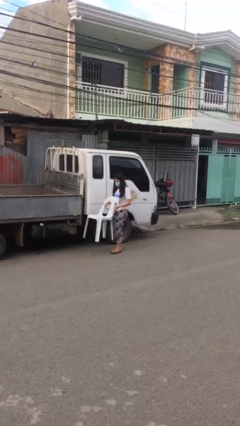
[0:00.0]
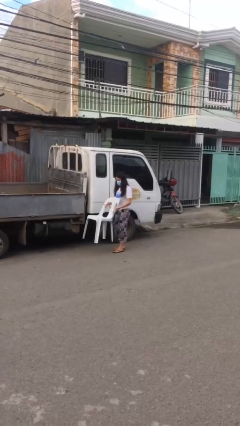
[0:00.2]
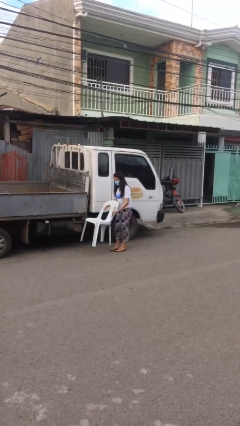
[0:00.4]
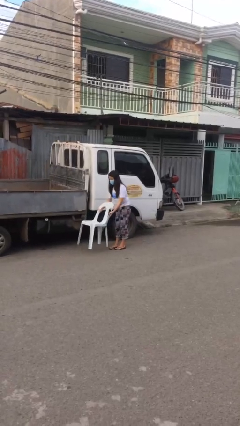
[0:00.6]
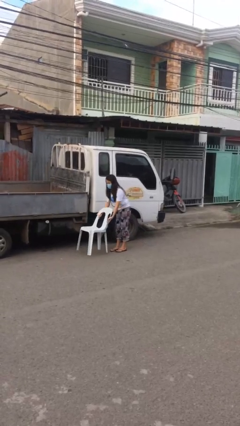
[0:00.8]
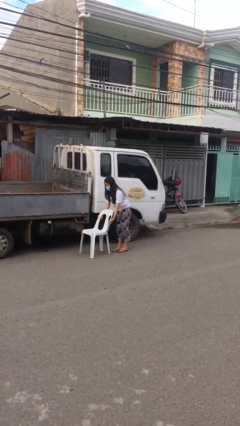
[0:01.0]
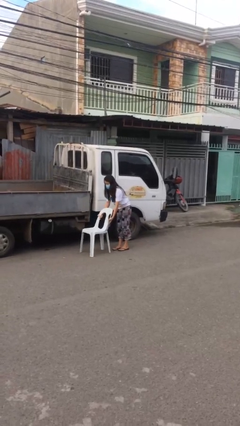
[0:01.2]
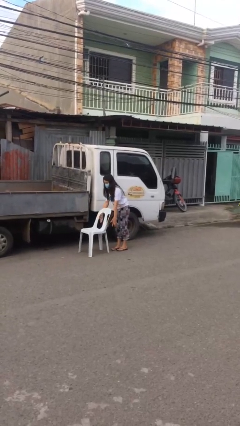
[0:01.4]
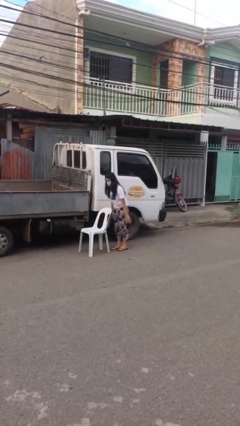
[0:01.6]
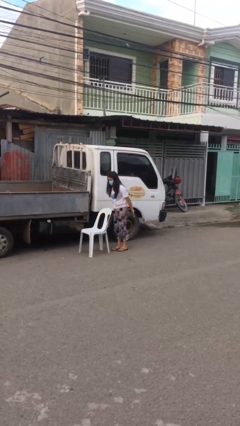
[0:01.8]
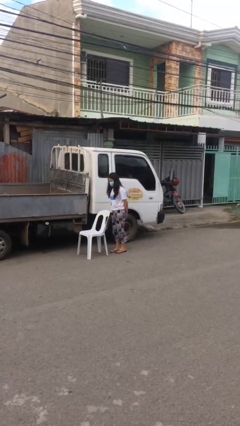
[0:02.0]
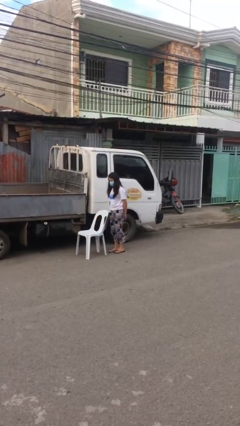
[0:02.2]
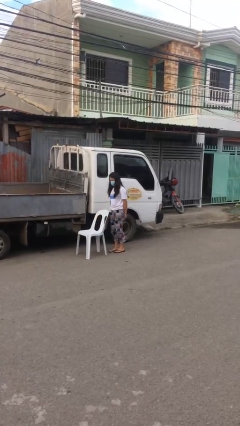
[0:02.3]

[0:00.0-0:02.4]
person puts down object on floor

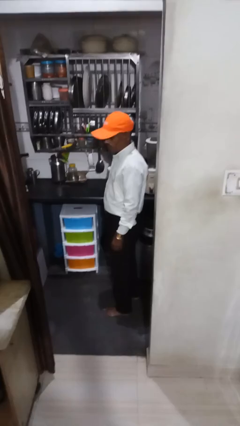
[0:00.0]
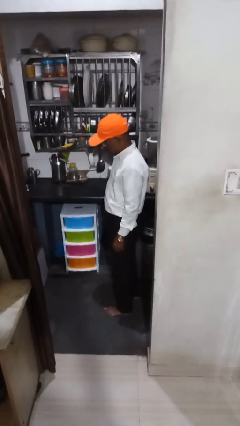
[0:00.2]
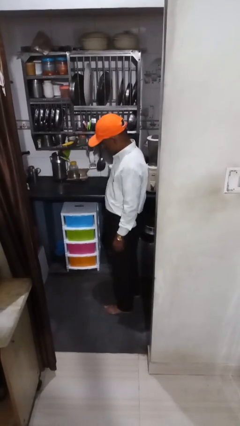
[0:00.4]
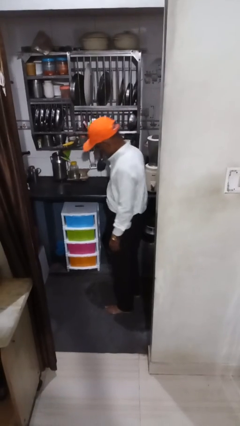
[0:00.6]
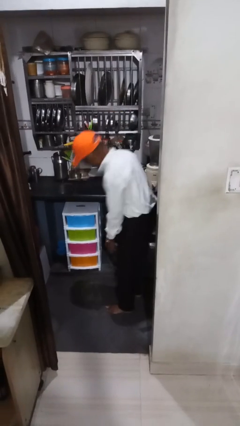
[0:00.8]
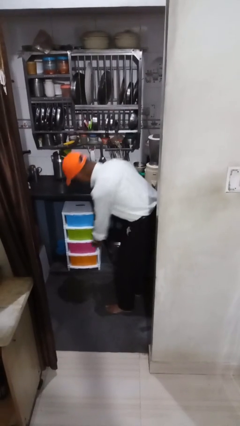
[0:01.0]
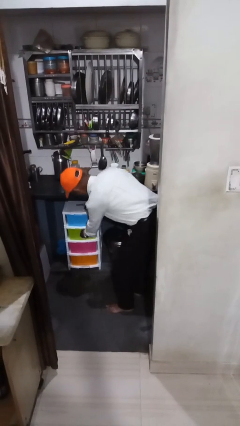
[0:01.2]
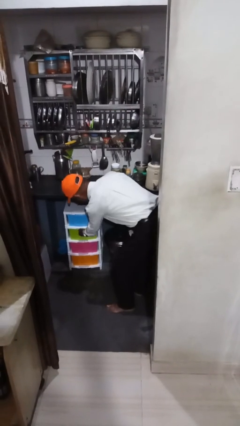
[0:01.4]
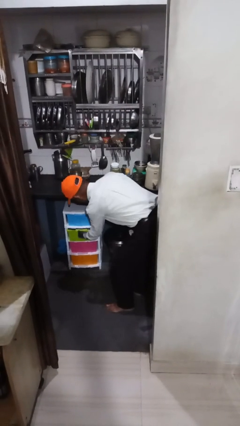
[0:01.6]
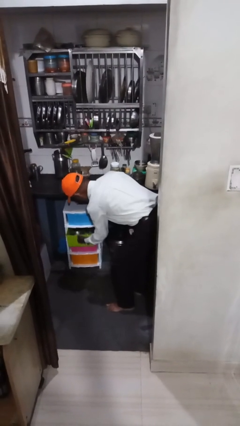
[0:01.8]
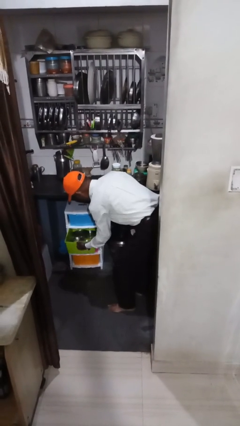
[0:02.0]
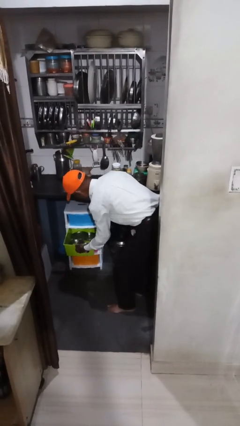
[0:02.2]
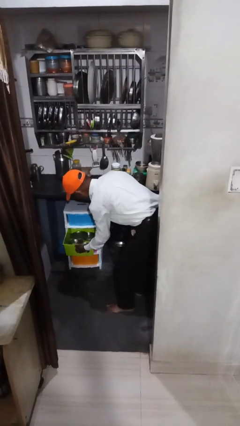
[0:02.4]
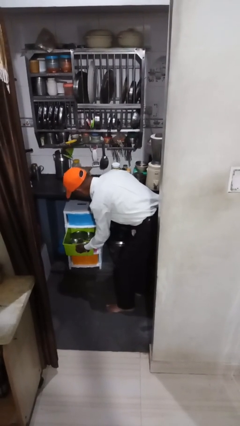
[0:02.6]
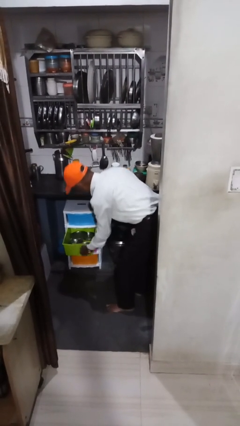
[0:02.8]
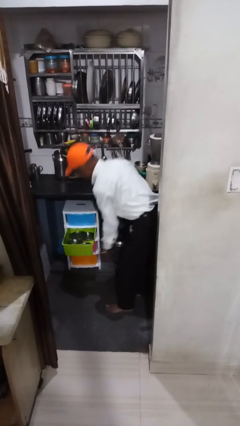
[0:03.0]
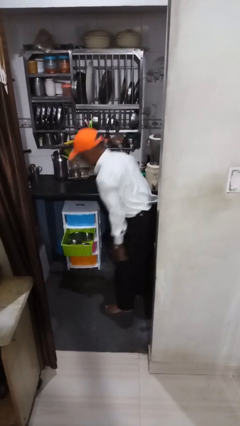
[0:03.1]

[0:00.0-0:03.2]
person opens kitchen drawer

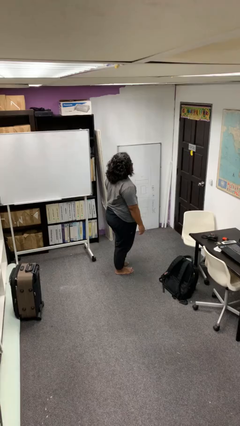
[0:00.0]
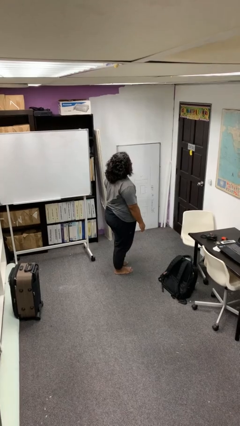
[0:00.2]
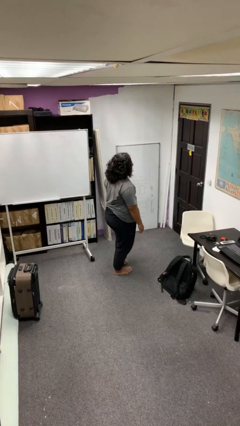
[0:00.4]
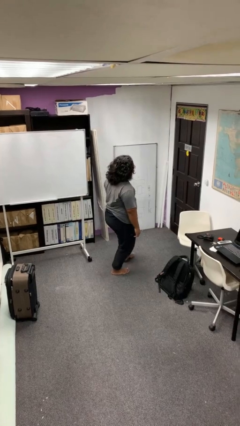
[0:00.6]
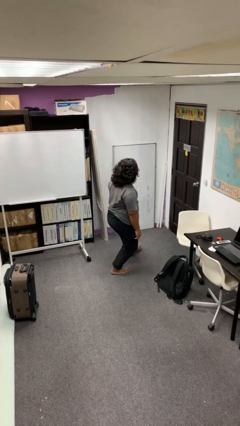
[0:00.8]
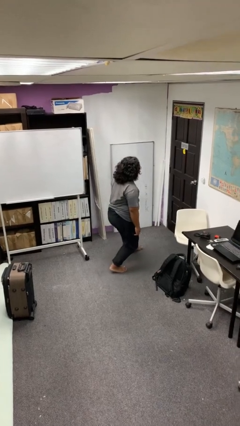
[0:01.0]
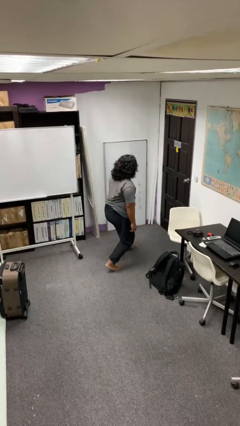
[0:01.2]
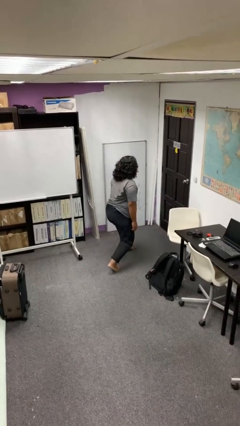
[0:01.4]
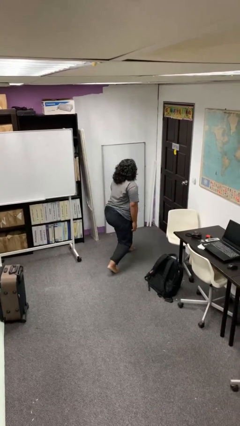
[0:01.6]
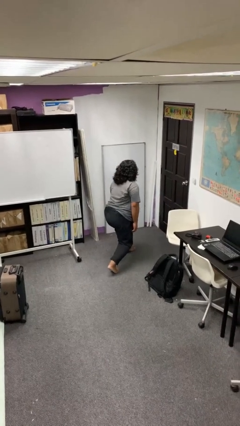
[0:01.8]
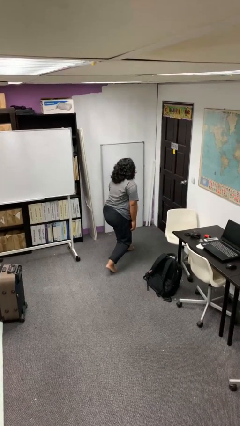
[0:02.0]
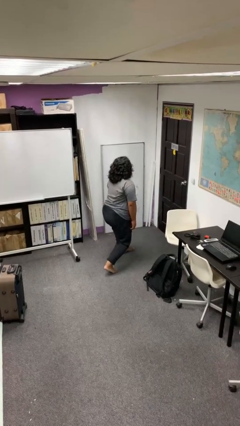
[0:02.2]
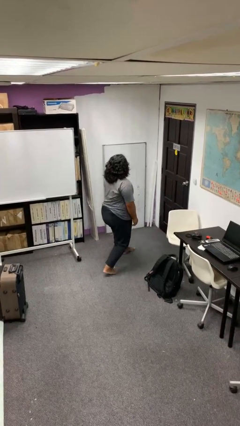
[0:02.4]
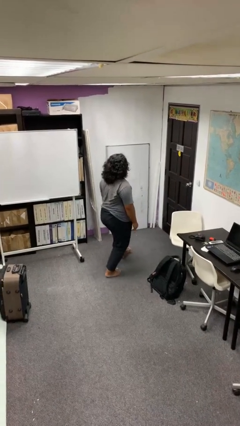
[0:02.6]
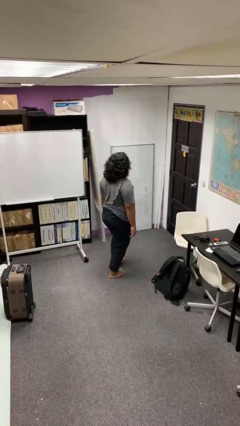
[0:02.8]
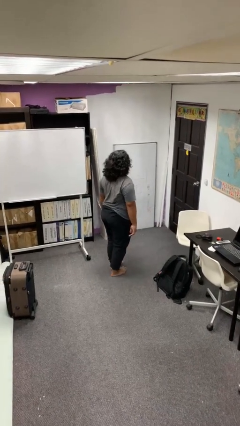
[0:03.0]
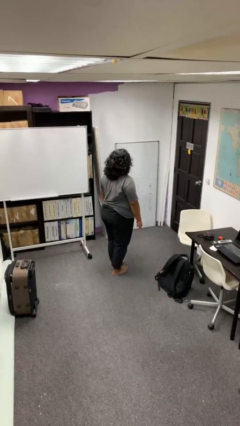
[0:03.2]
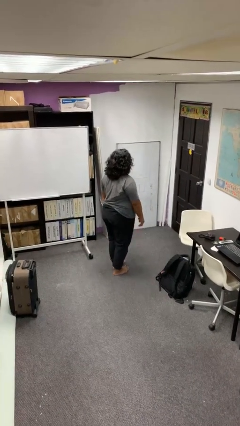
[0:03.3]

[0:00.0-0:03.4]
person exercises with lunges

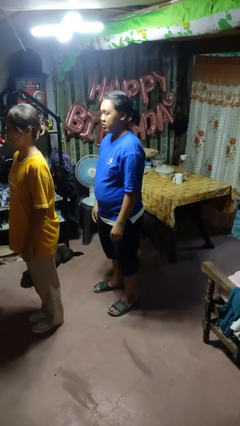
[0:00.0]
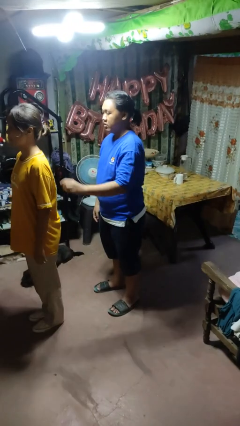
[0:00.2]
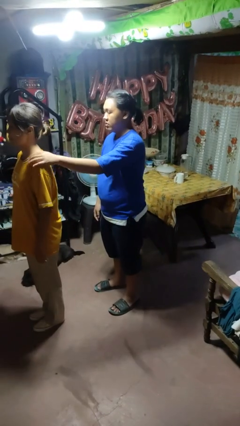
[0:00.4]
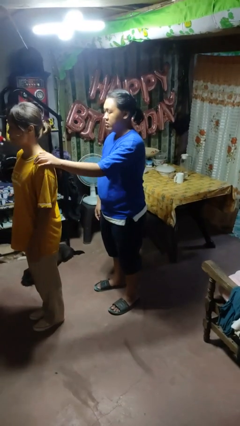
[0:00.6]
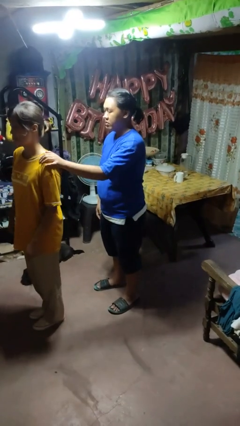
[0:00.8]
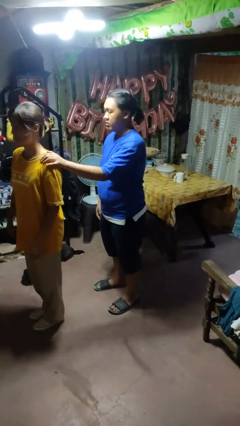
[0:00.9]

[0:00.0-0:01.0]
person grabs person by shoulder

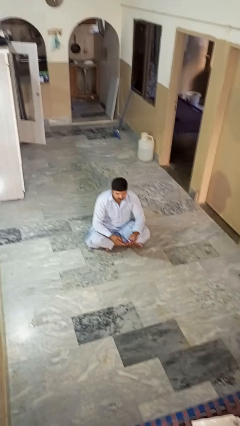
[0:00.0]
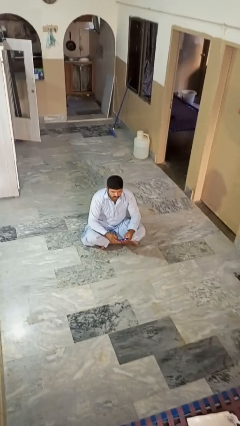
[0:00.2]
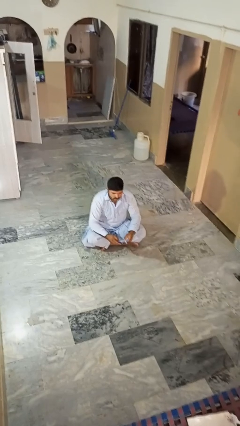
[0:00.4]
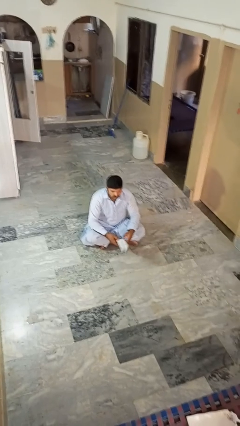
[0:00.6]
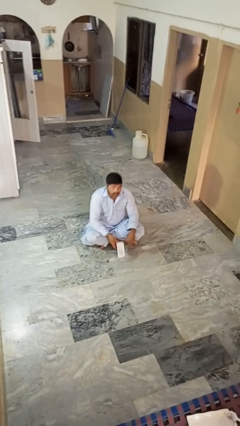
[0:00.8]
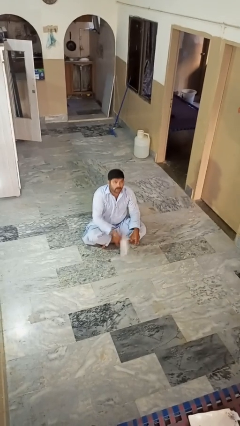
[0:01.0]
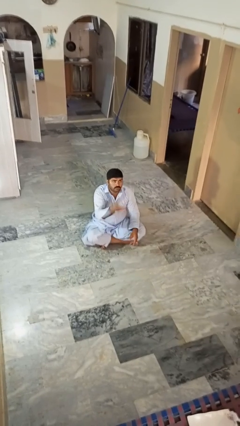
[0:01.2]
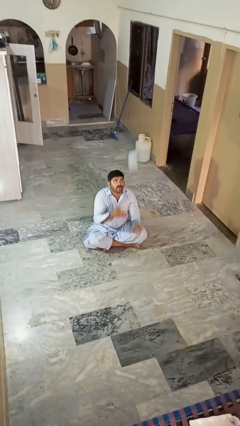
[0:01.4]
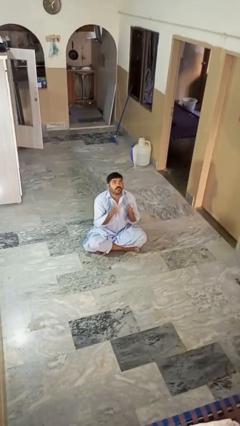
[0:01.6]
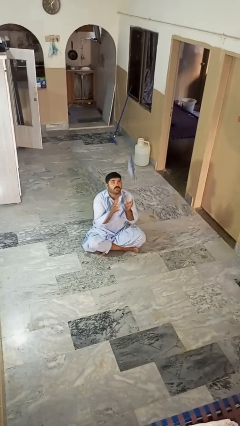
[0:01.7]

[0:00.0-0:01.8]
person drops object

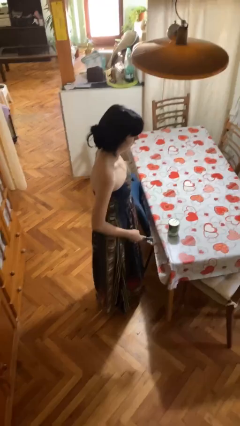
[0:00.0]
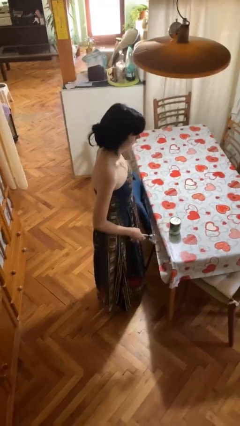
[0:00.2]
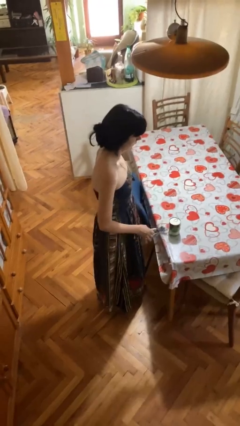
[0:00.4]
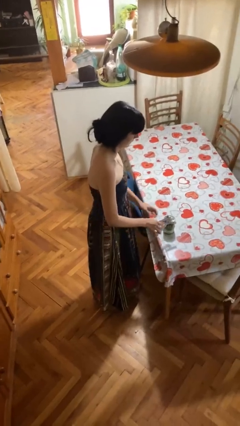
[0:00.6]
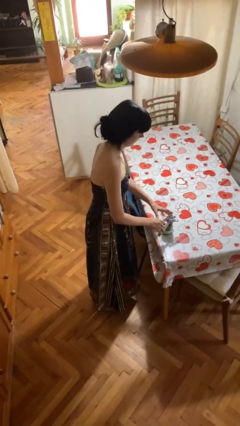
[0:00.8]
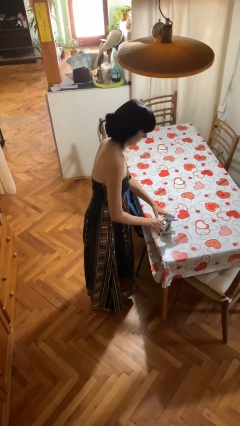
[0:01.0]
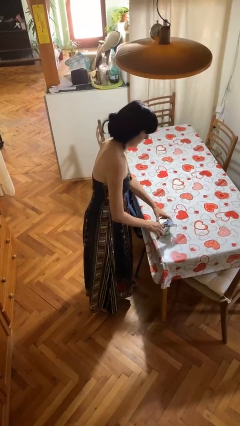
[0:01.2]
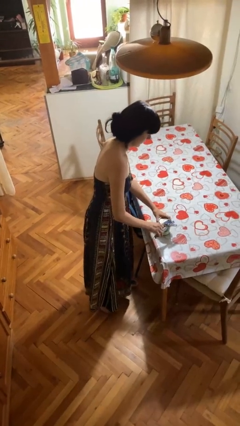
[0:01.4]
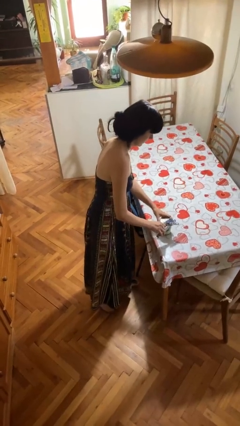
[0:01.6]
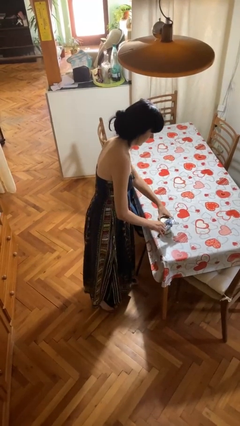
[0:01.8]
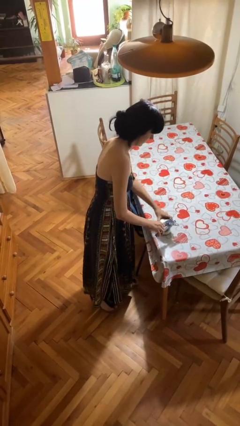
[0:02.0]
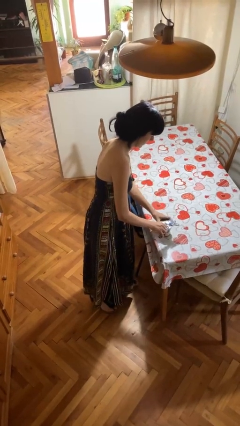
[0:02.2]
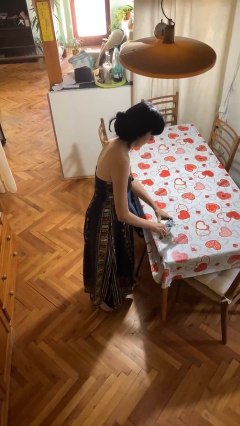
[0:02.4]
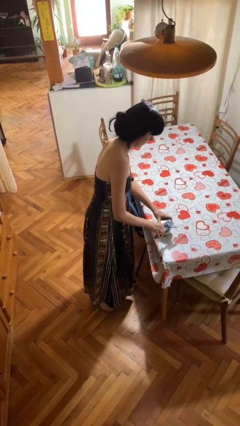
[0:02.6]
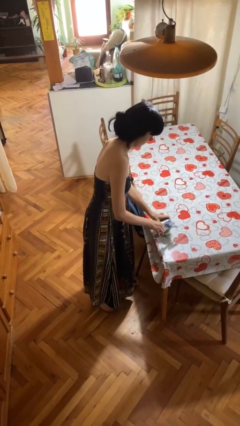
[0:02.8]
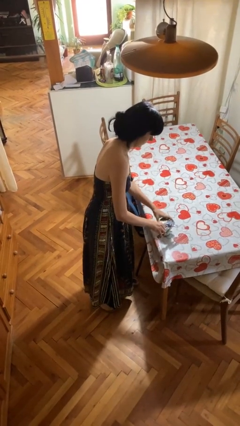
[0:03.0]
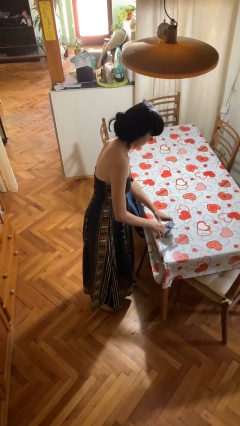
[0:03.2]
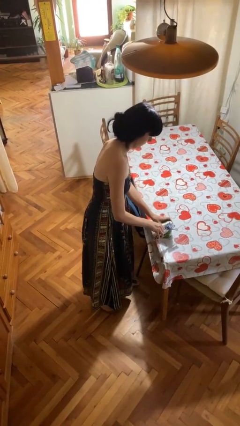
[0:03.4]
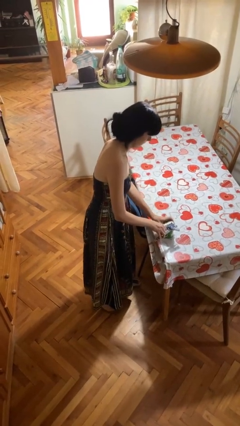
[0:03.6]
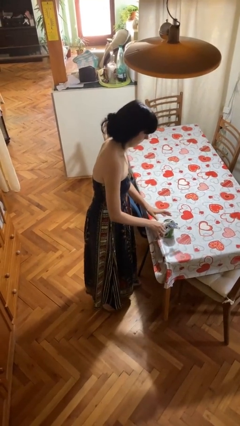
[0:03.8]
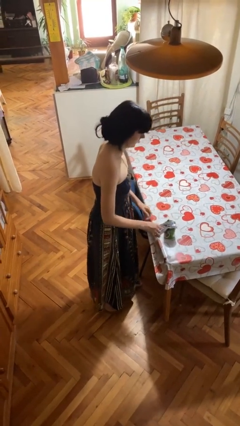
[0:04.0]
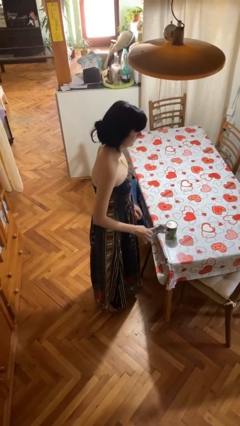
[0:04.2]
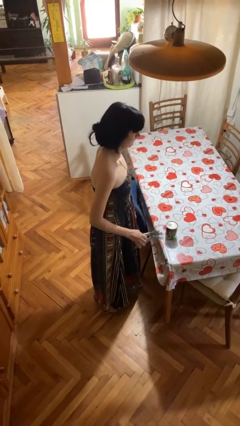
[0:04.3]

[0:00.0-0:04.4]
person opens can with can opener

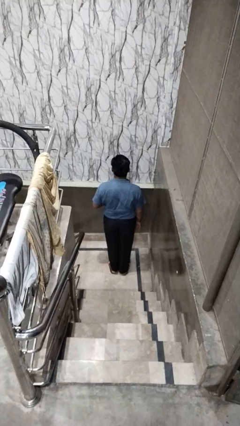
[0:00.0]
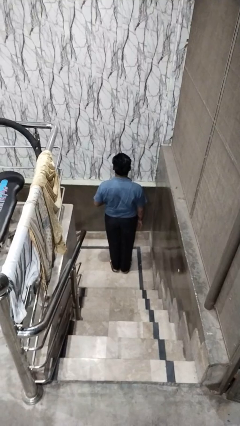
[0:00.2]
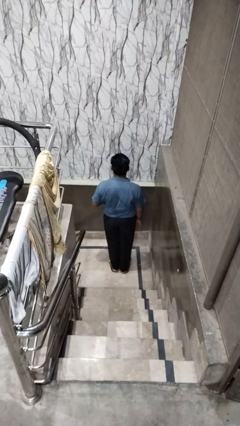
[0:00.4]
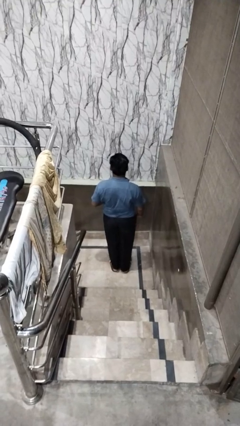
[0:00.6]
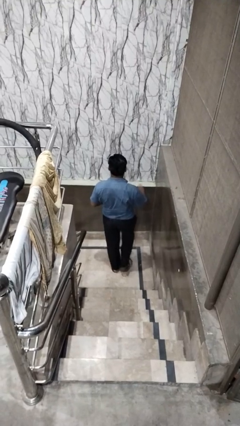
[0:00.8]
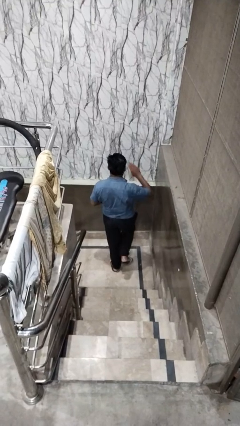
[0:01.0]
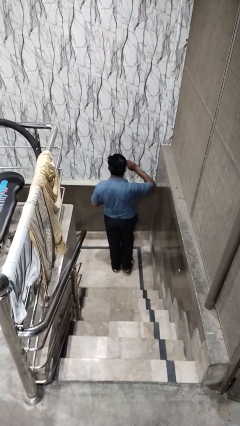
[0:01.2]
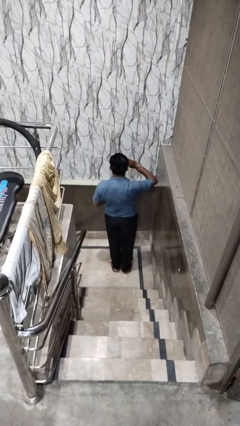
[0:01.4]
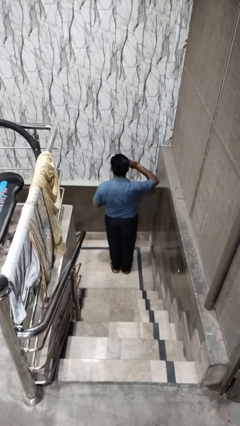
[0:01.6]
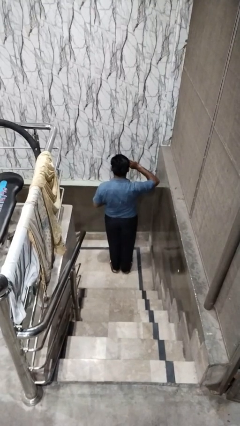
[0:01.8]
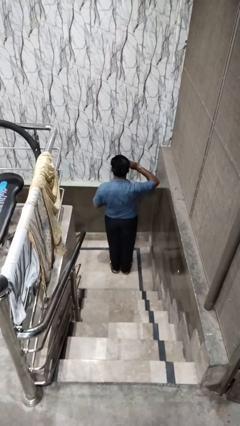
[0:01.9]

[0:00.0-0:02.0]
person salutes
